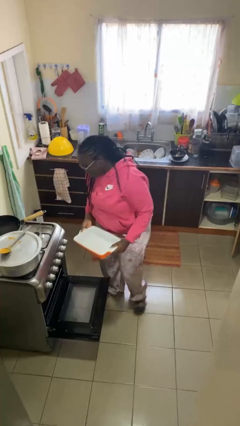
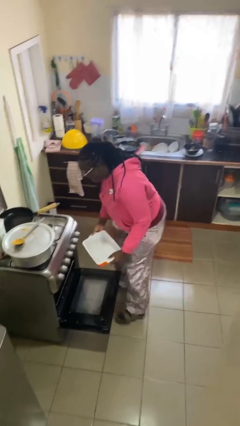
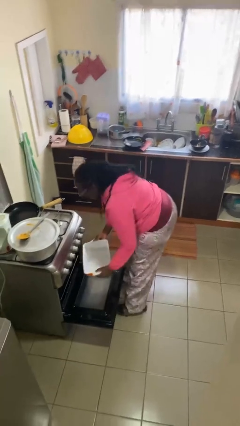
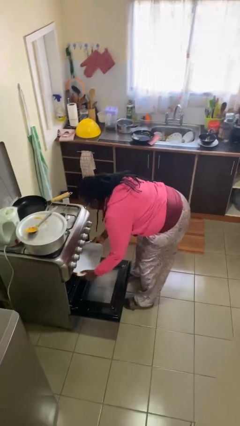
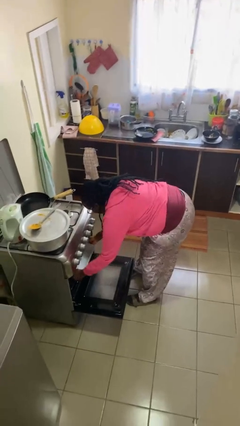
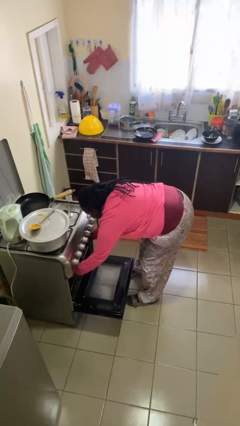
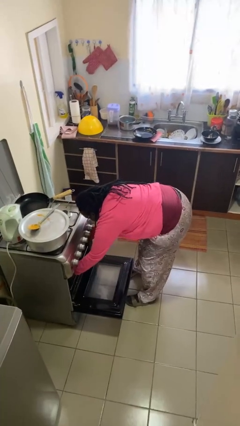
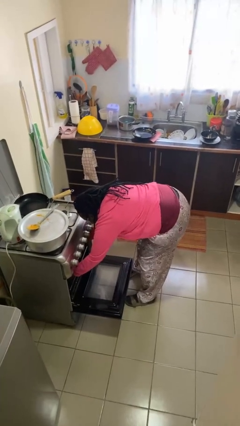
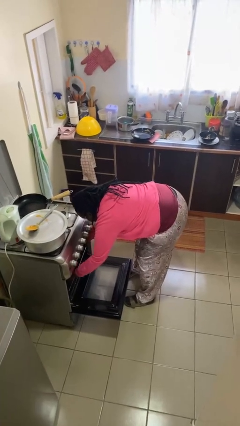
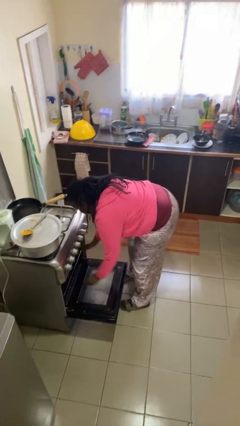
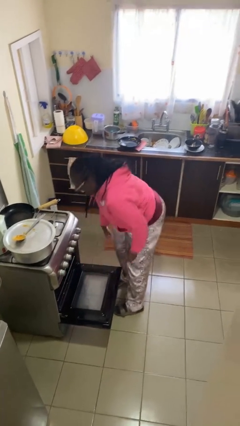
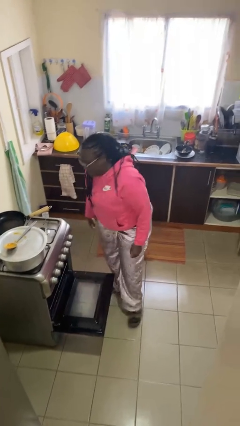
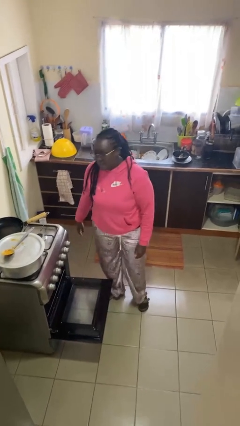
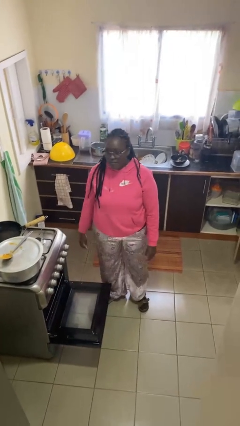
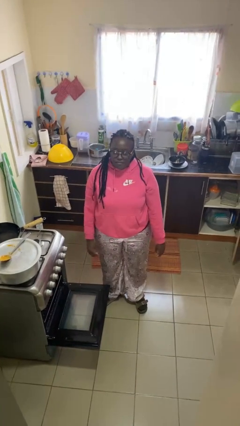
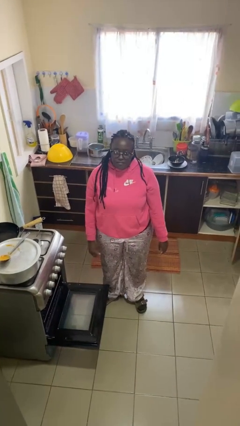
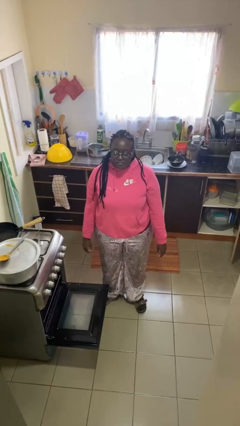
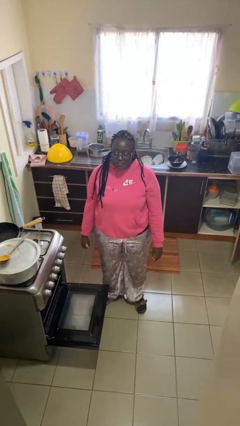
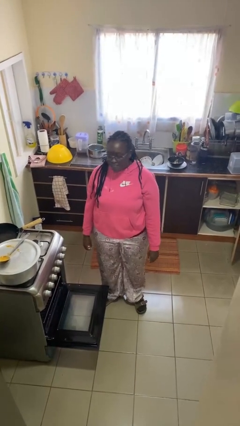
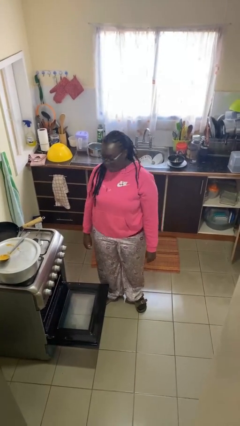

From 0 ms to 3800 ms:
person puts object into oven

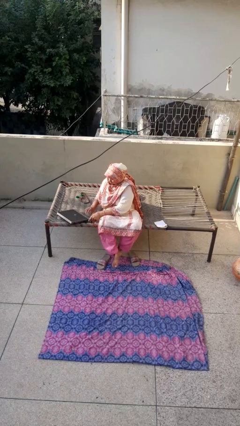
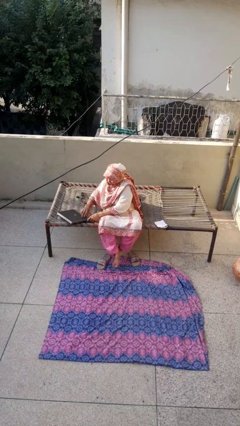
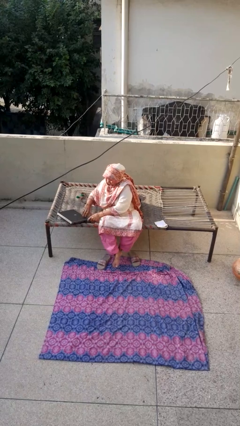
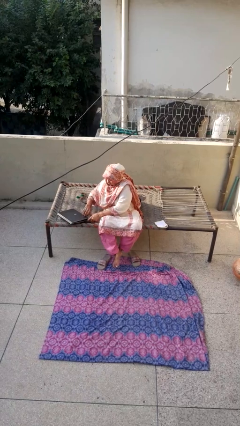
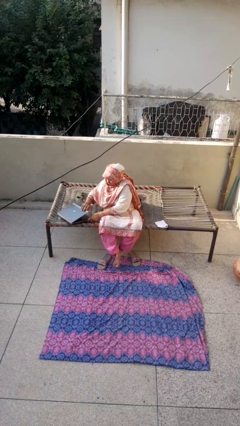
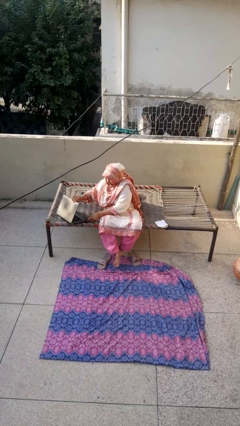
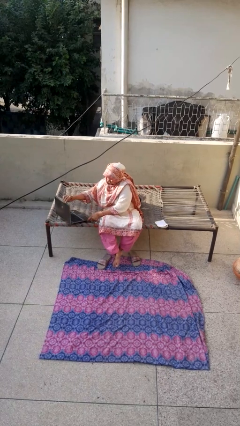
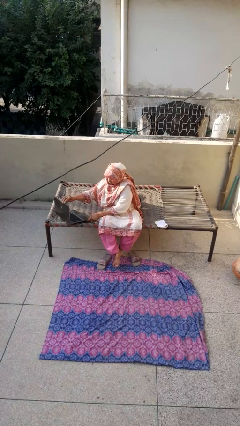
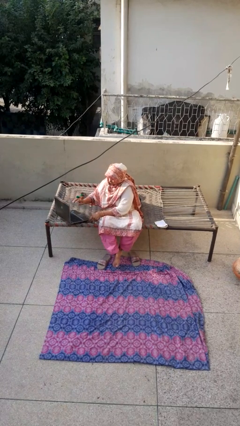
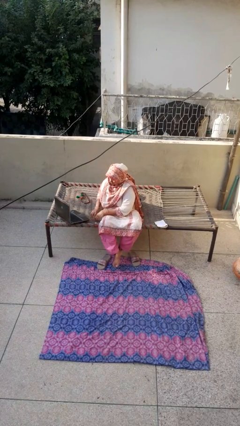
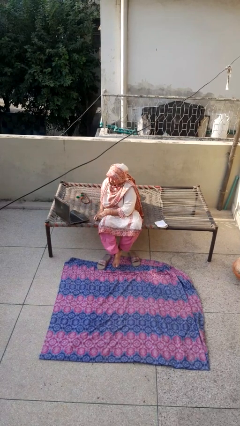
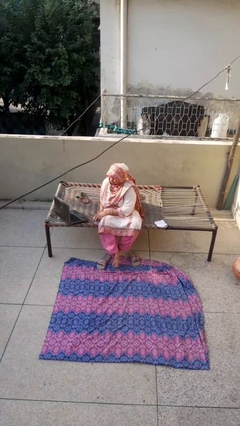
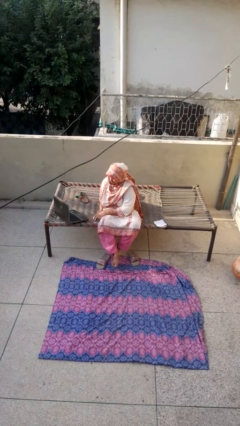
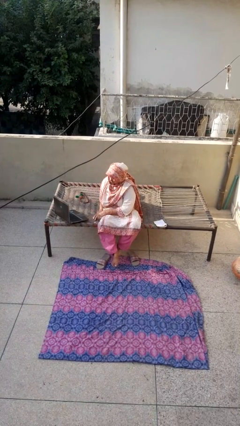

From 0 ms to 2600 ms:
person opens laptop

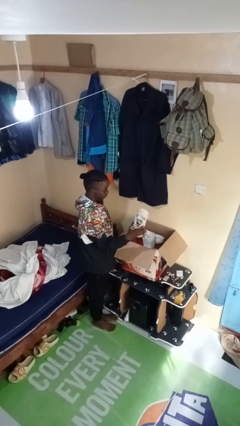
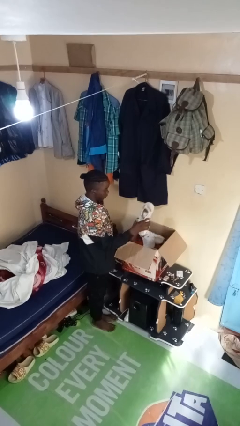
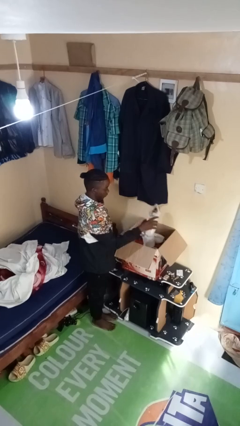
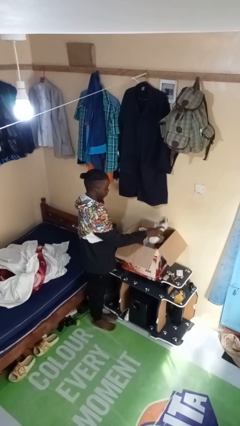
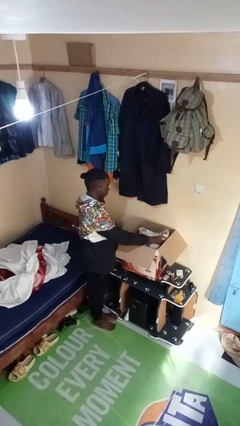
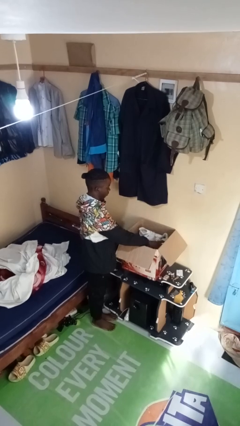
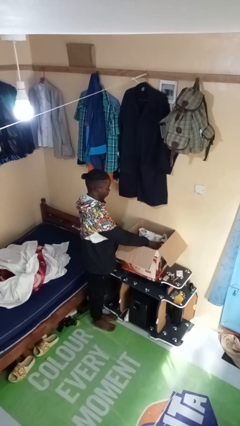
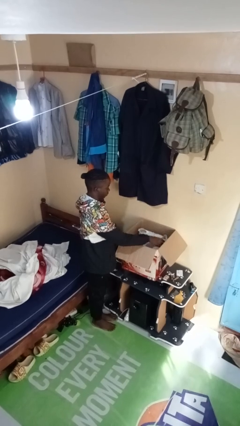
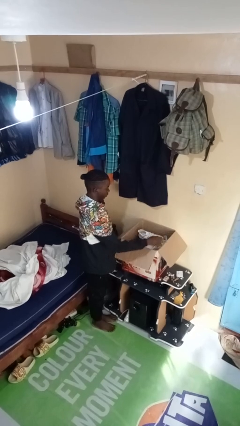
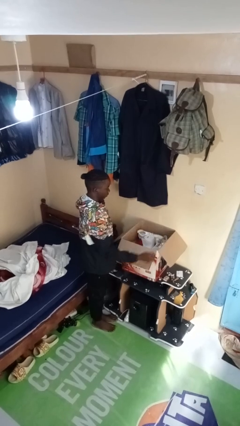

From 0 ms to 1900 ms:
person puts object into box

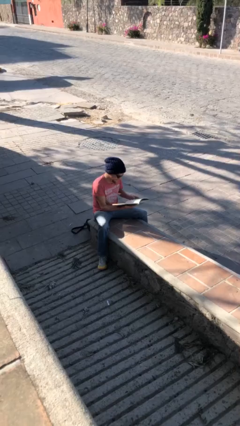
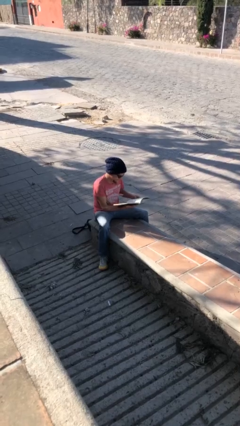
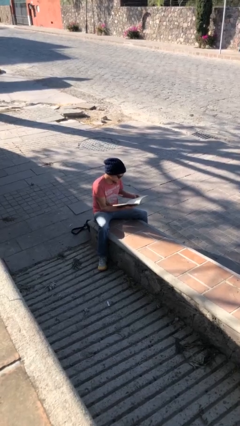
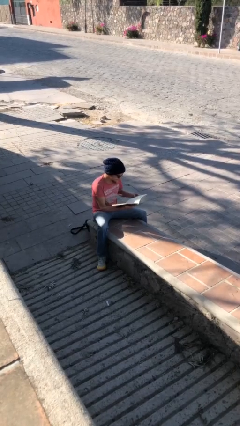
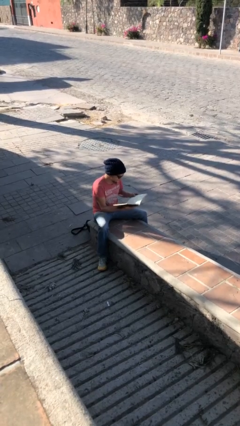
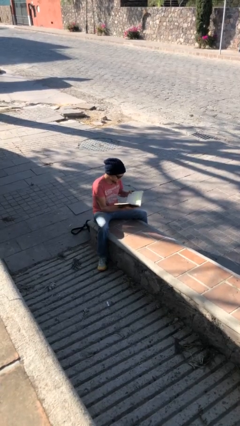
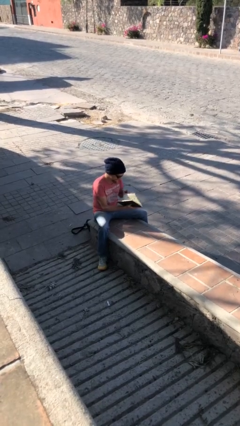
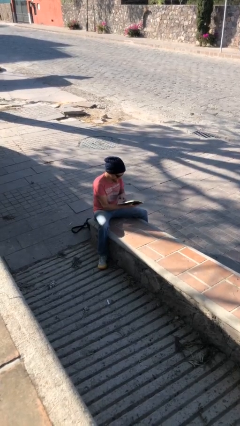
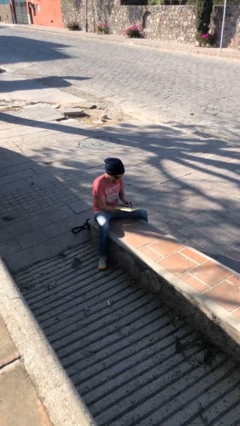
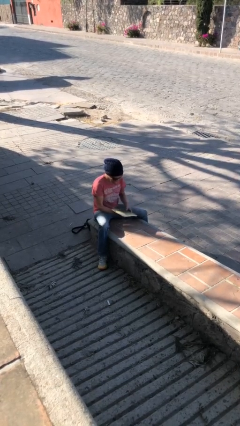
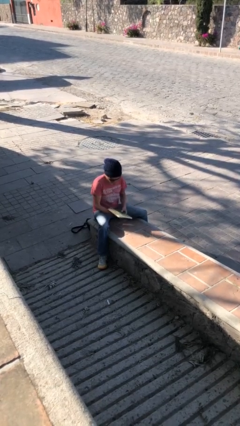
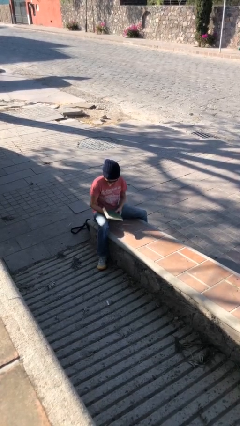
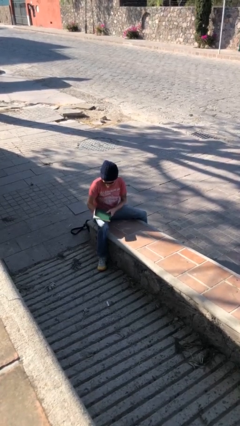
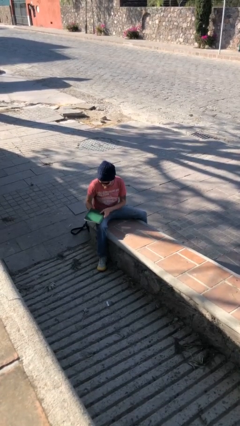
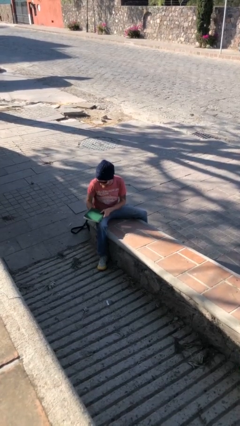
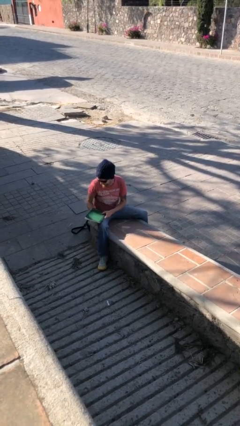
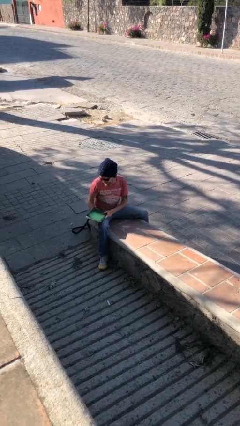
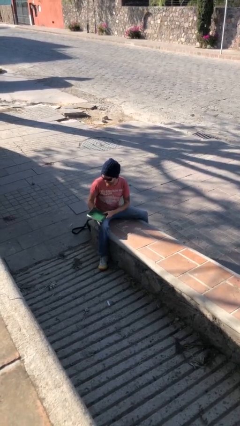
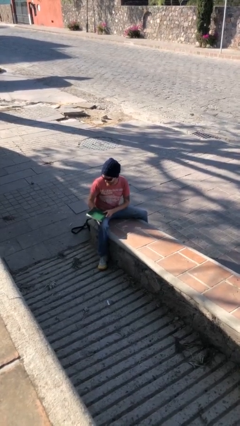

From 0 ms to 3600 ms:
person reads document

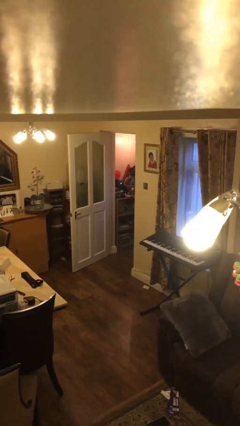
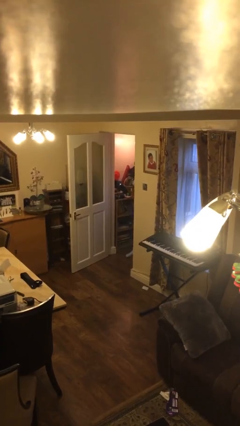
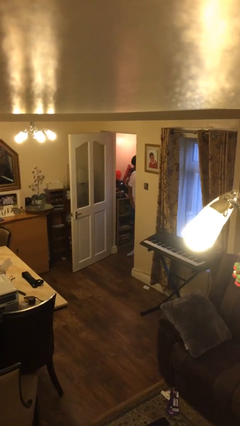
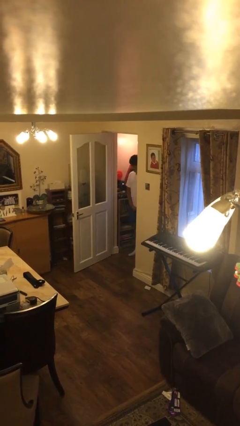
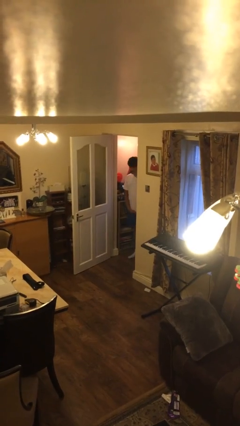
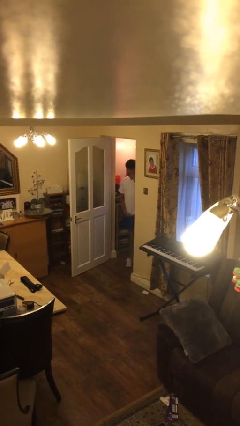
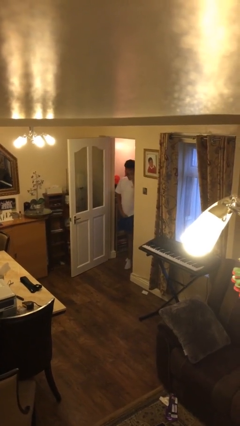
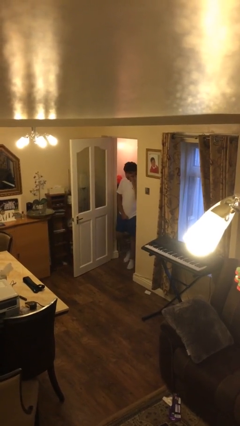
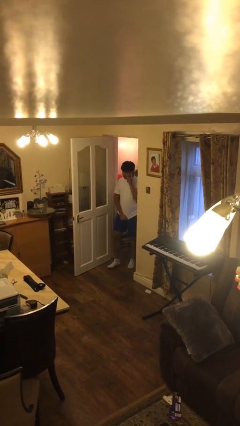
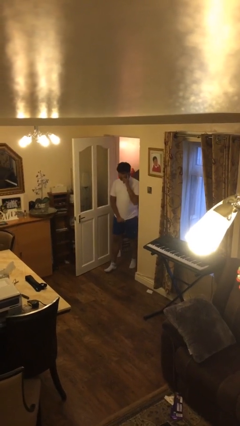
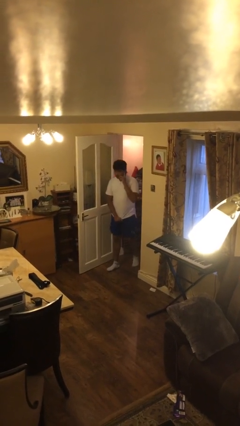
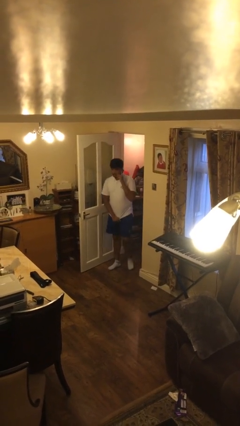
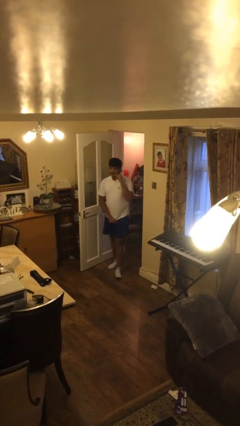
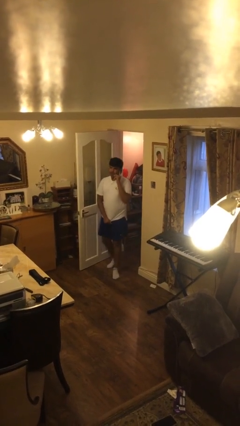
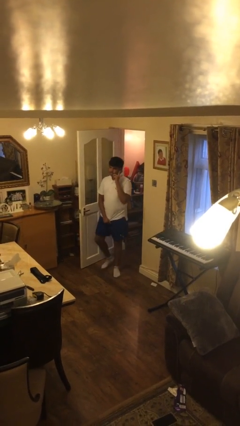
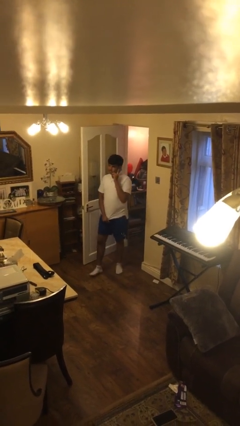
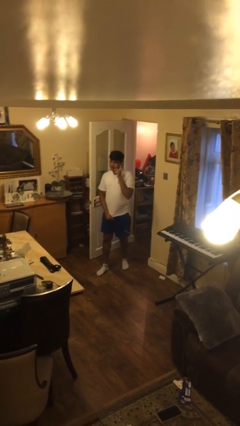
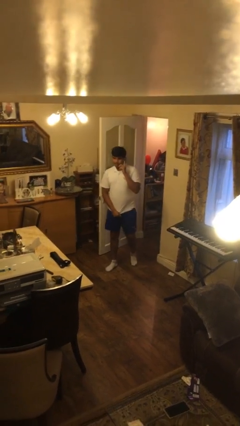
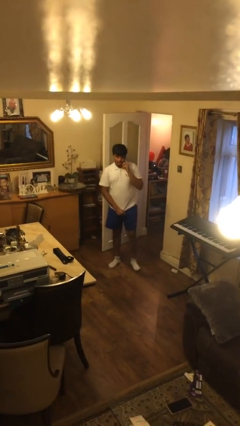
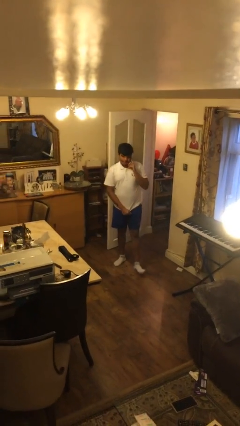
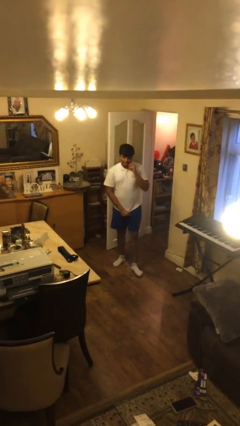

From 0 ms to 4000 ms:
person enters scene through structure

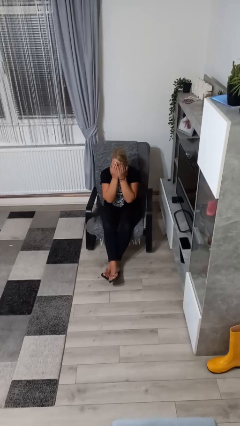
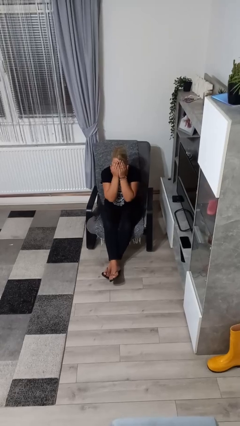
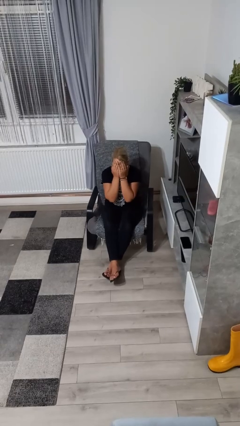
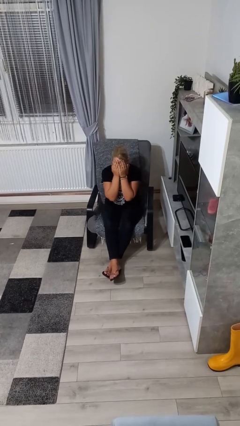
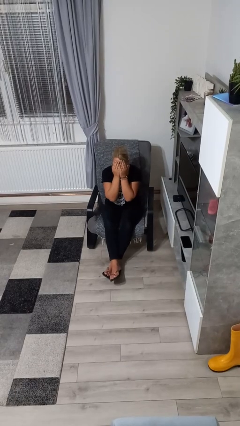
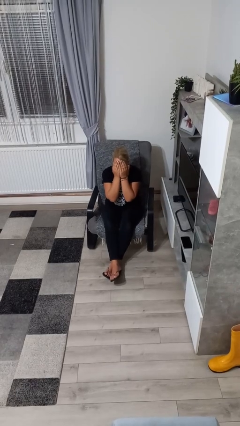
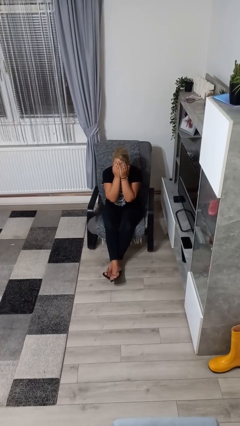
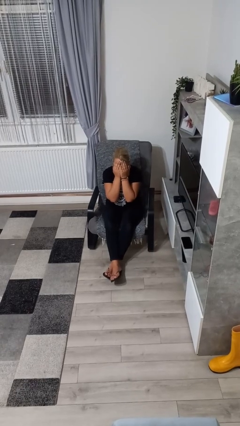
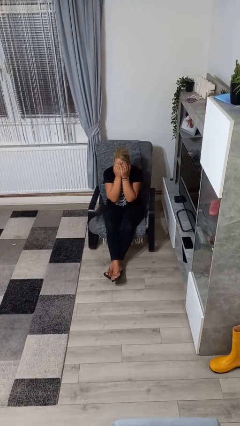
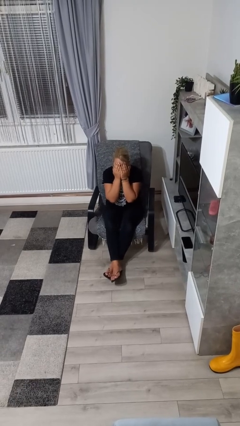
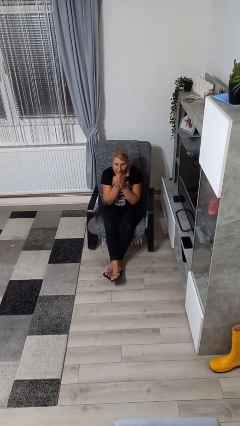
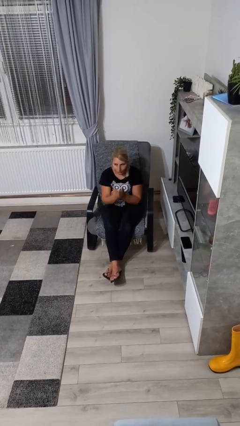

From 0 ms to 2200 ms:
person covers face with hands
